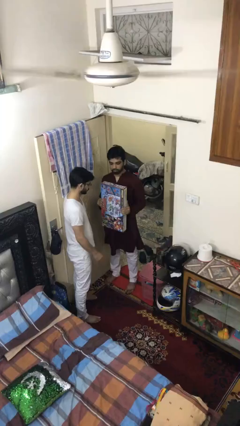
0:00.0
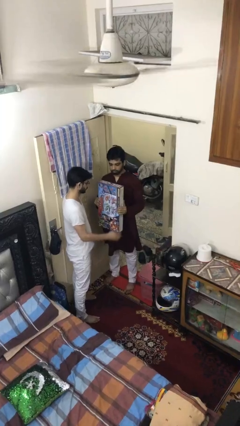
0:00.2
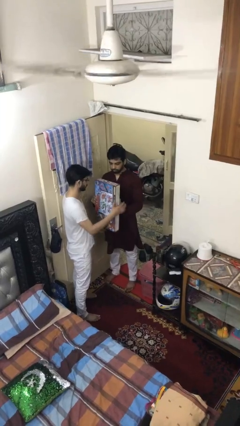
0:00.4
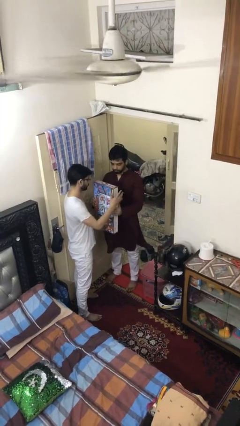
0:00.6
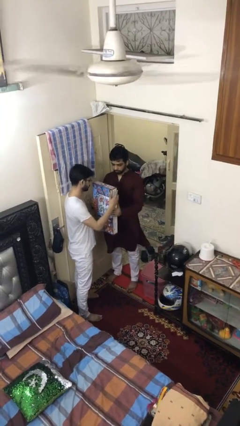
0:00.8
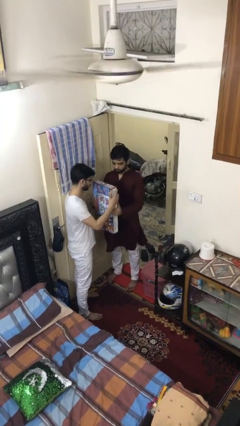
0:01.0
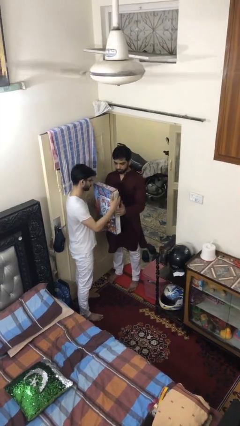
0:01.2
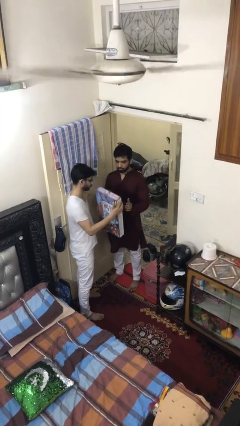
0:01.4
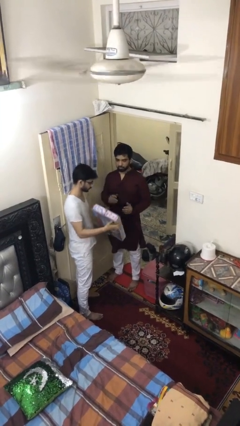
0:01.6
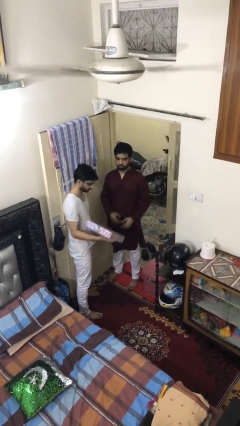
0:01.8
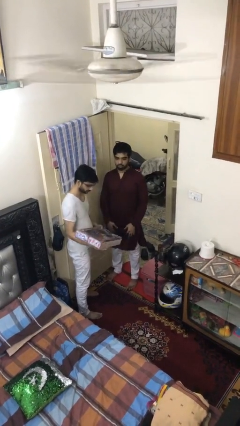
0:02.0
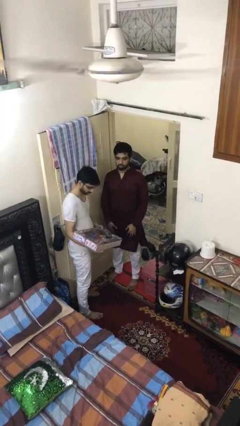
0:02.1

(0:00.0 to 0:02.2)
person transfers object to person

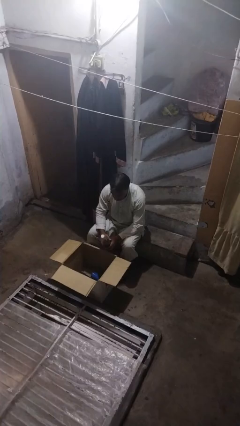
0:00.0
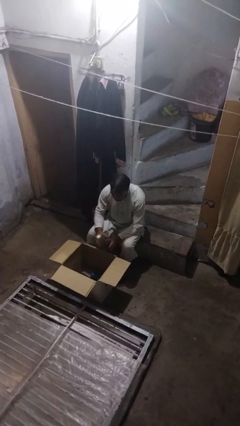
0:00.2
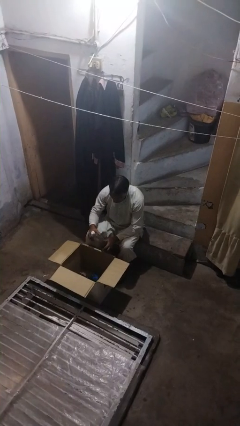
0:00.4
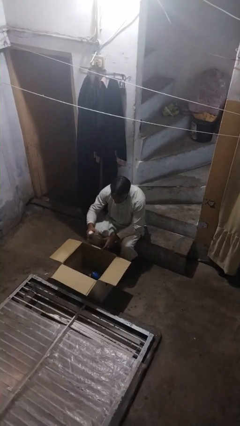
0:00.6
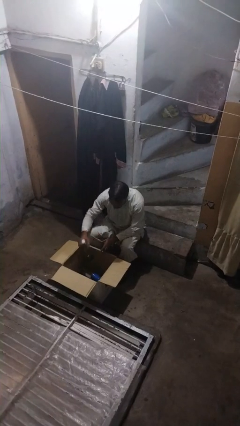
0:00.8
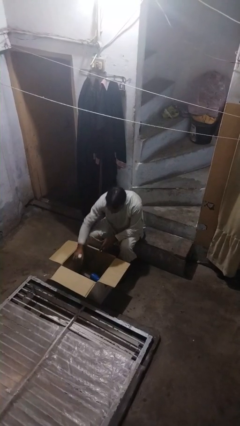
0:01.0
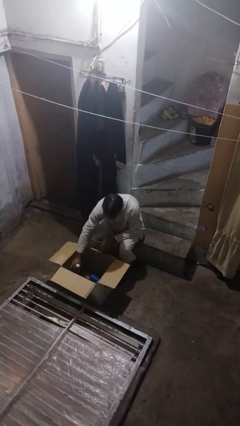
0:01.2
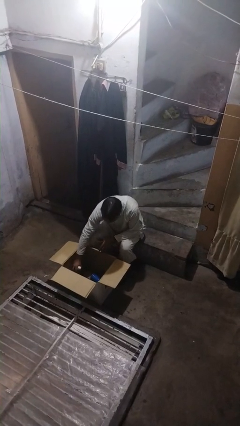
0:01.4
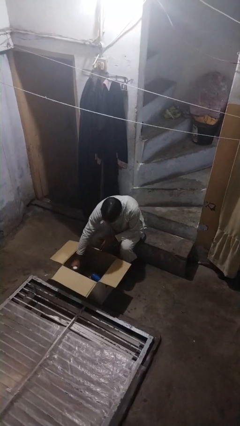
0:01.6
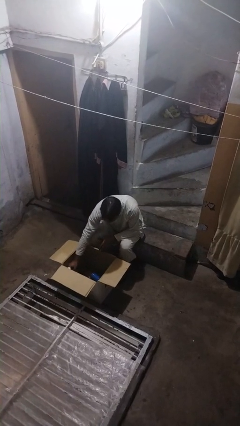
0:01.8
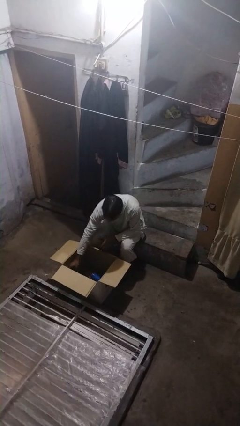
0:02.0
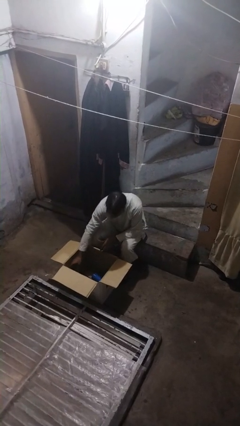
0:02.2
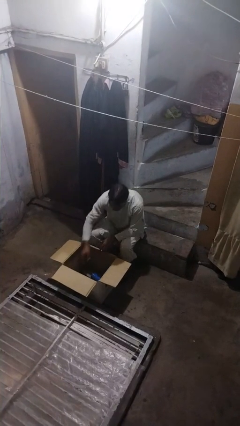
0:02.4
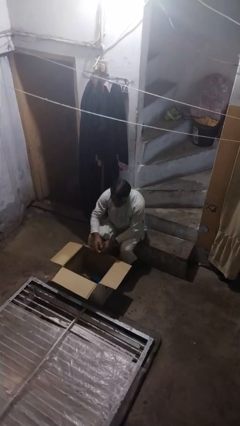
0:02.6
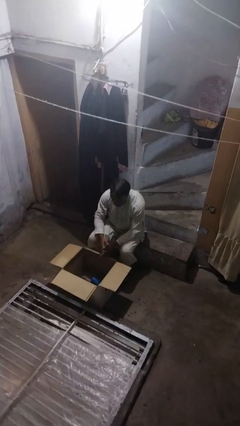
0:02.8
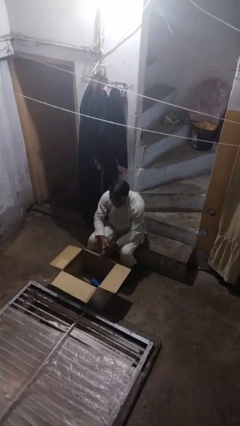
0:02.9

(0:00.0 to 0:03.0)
person puts object into box

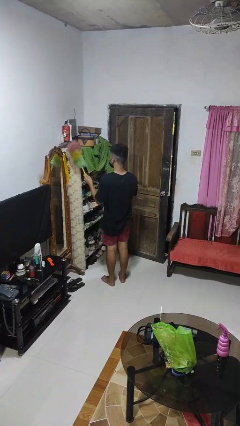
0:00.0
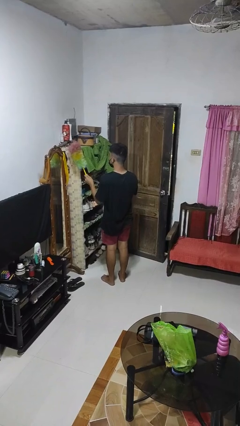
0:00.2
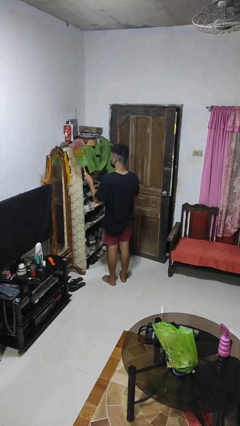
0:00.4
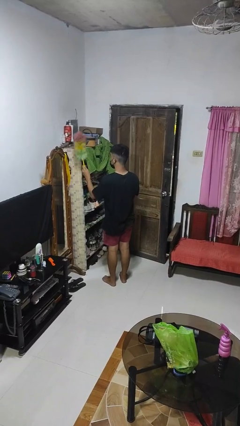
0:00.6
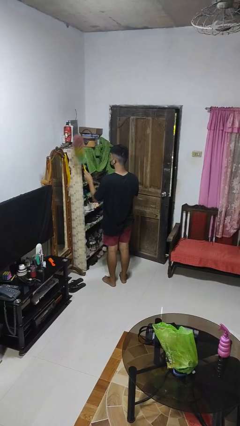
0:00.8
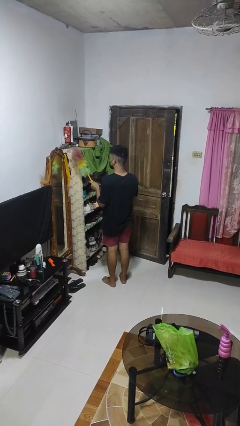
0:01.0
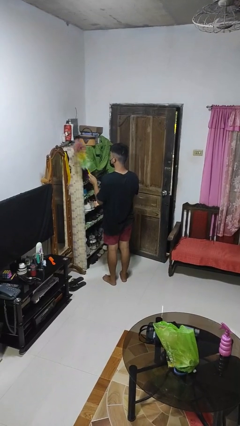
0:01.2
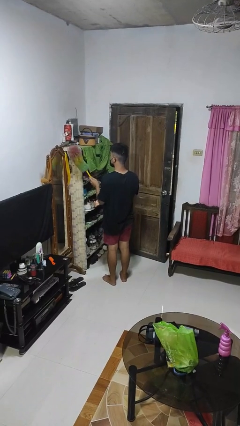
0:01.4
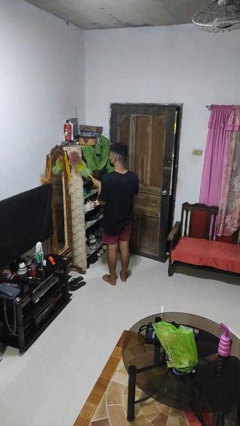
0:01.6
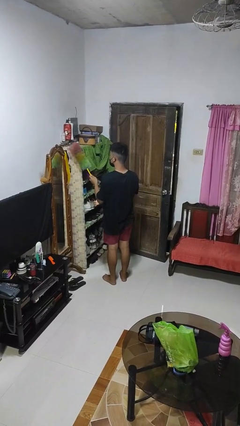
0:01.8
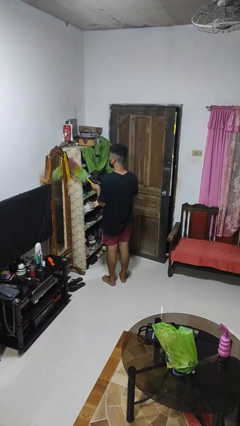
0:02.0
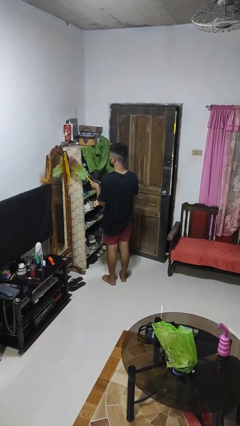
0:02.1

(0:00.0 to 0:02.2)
person dusts furniture

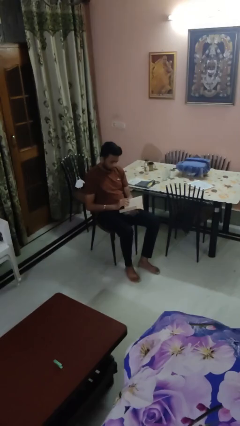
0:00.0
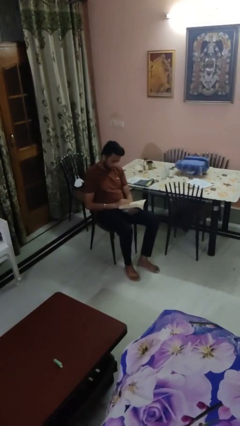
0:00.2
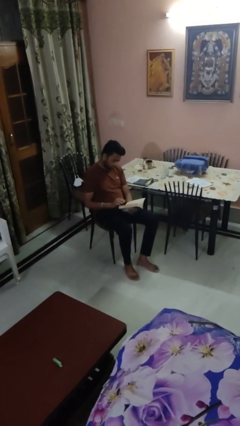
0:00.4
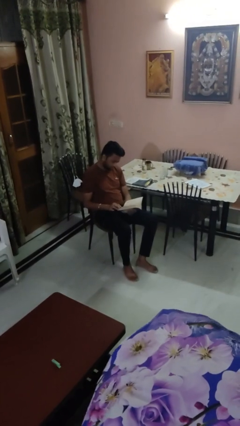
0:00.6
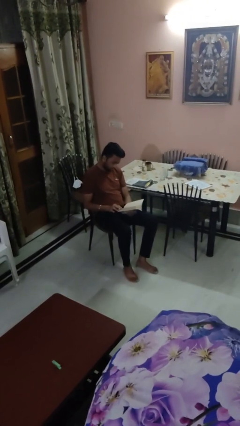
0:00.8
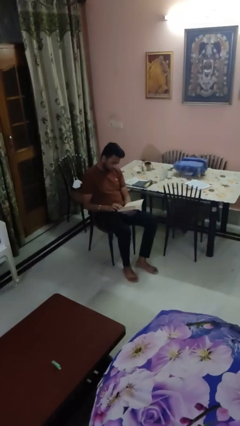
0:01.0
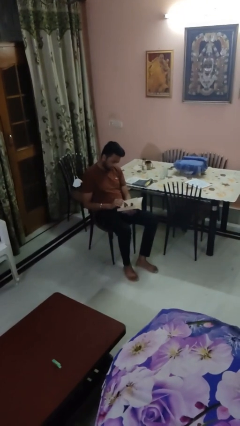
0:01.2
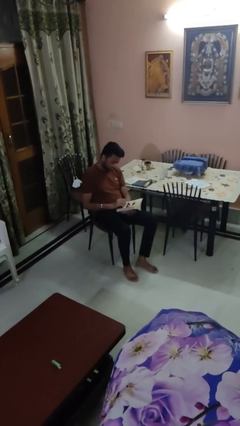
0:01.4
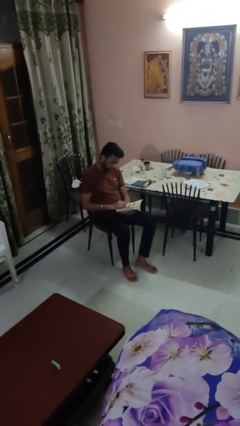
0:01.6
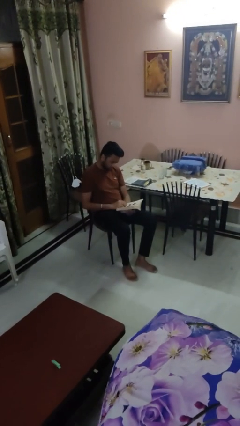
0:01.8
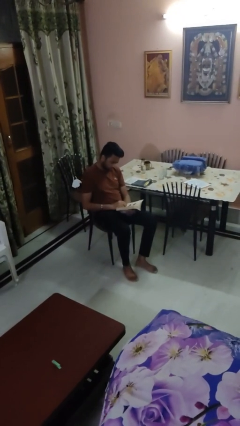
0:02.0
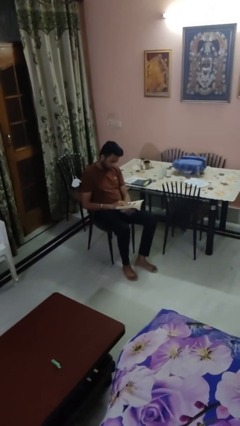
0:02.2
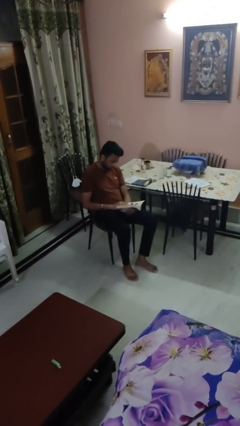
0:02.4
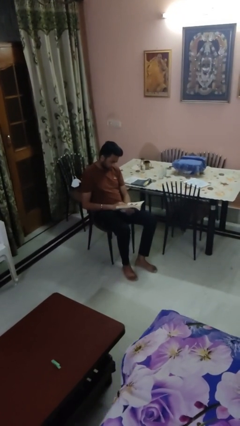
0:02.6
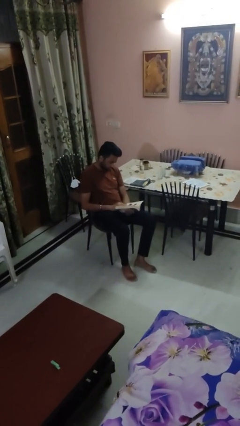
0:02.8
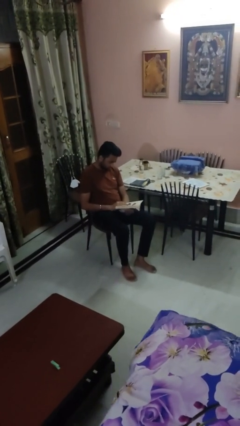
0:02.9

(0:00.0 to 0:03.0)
person reads book

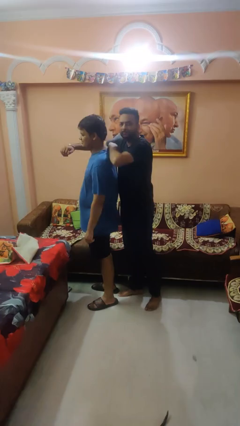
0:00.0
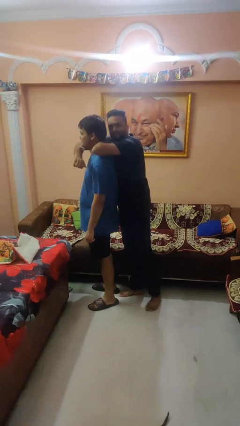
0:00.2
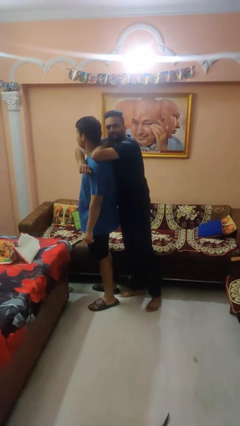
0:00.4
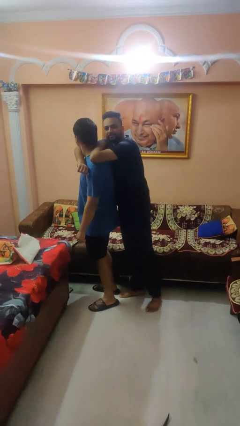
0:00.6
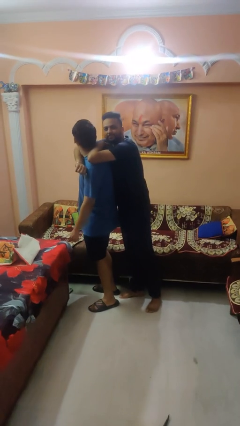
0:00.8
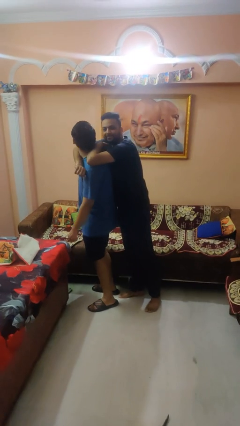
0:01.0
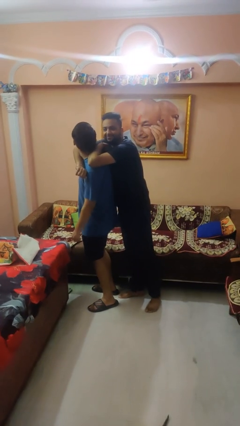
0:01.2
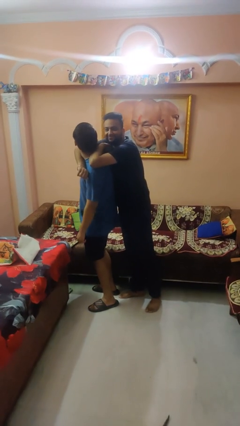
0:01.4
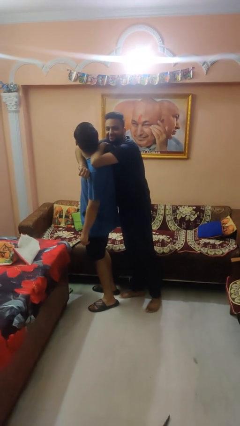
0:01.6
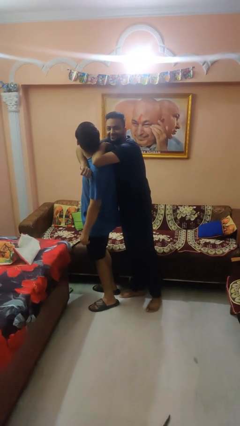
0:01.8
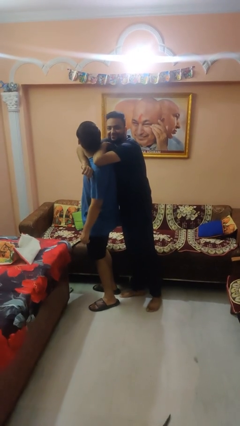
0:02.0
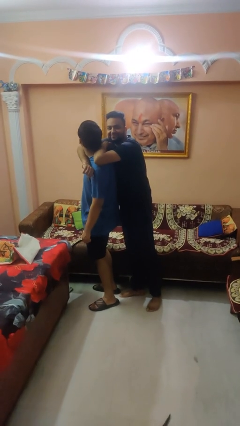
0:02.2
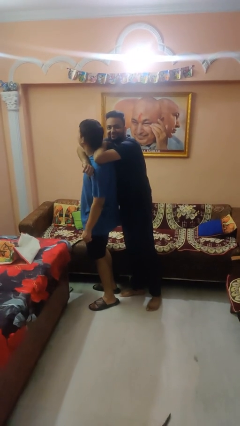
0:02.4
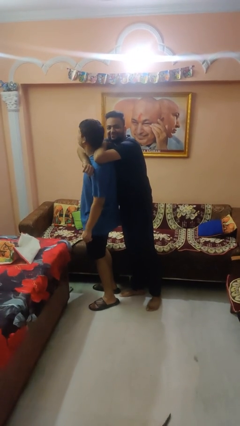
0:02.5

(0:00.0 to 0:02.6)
person hugs person from behind

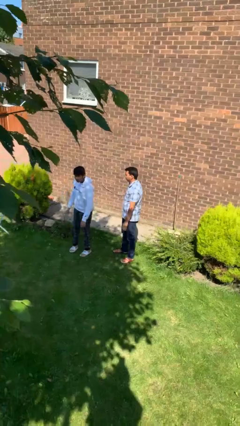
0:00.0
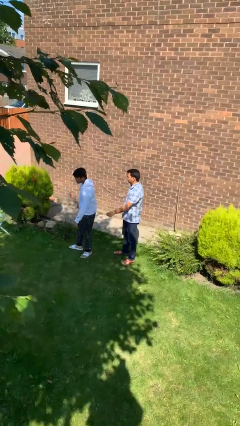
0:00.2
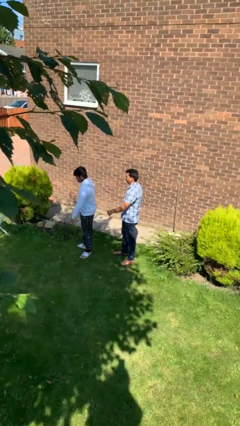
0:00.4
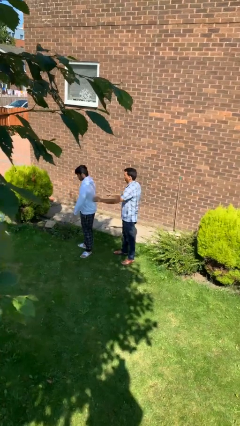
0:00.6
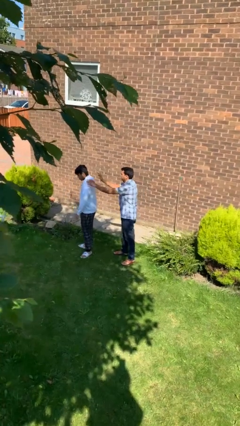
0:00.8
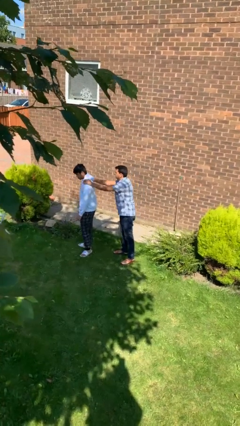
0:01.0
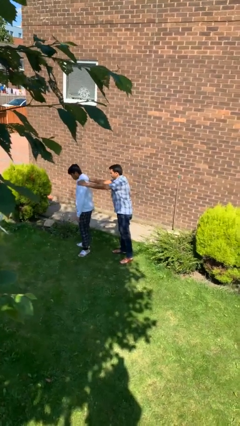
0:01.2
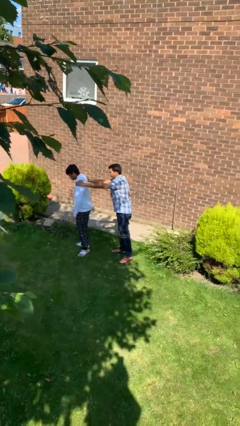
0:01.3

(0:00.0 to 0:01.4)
person grabs person by shoulder

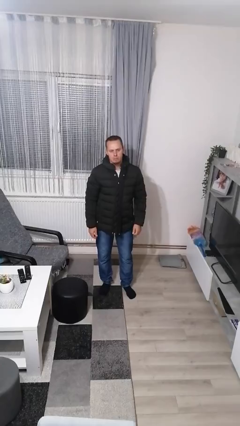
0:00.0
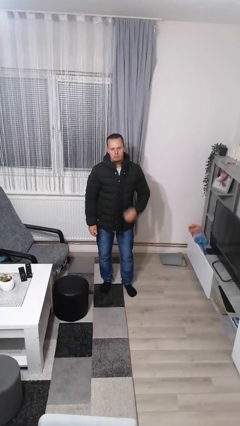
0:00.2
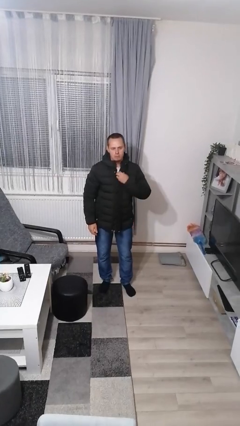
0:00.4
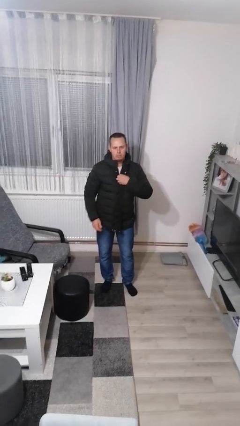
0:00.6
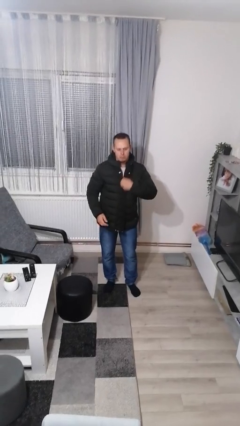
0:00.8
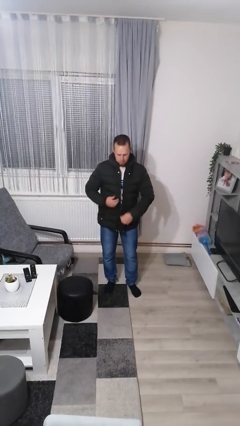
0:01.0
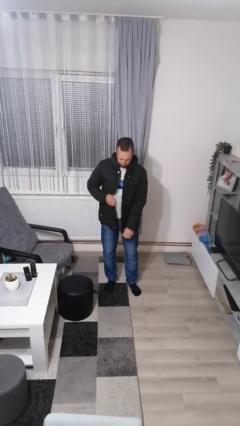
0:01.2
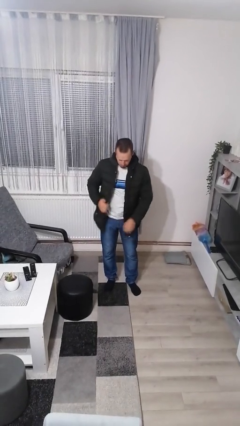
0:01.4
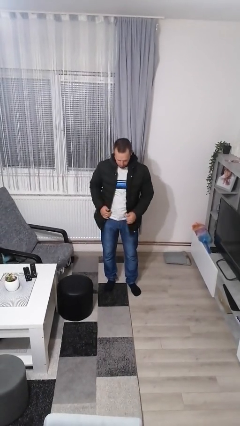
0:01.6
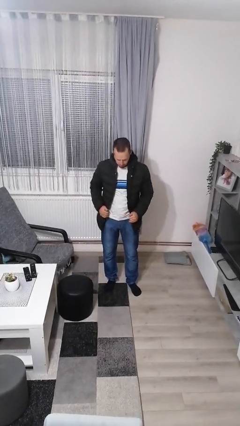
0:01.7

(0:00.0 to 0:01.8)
person unzips jacket

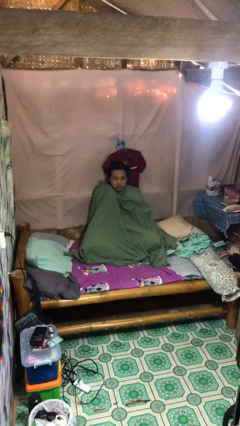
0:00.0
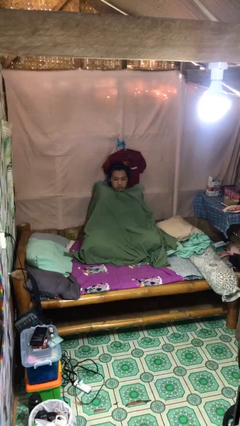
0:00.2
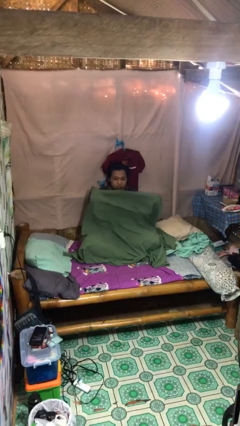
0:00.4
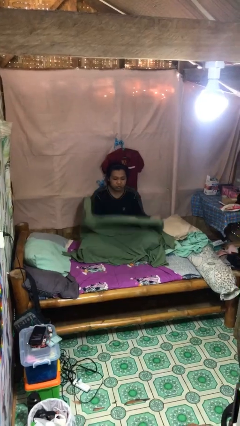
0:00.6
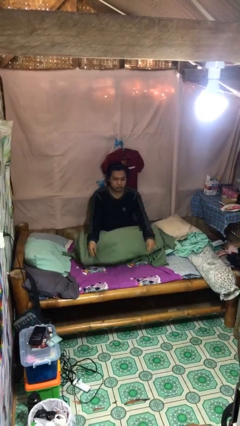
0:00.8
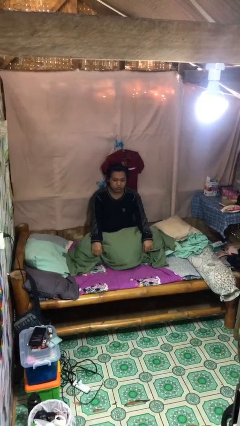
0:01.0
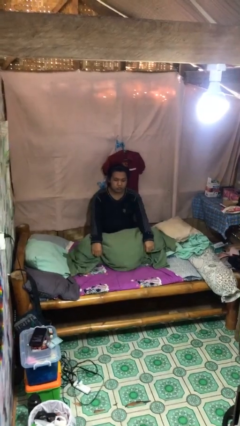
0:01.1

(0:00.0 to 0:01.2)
person uncovers with blanket
